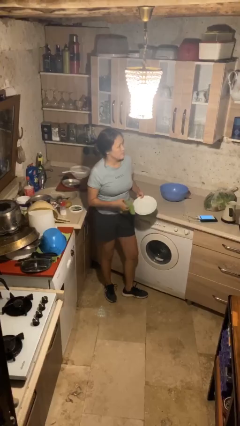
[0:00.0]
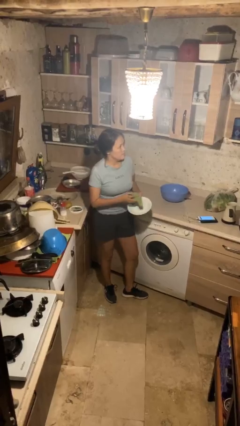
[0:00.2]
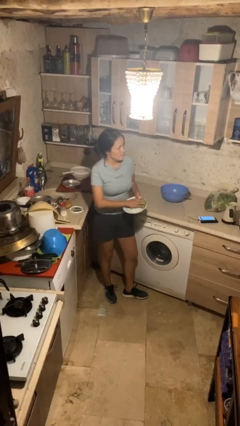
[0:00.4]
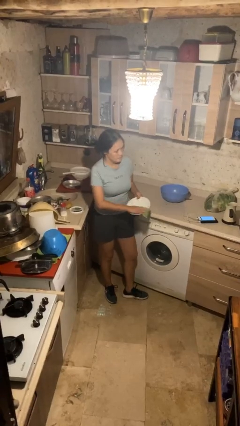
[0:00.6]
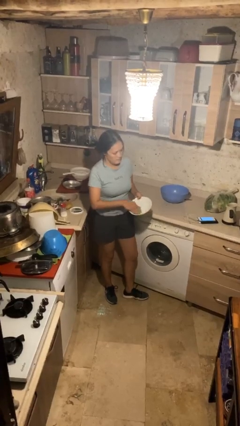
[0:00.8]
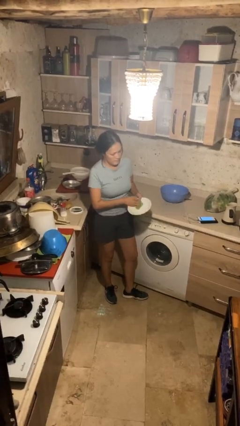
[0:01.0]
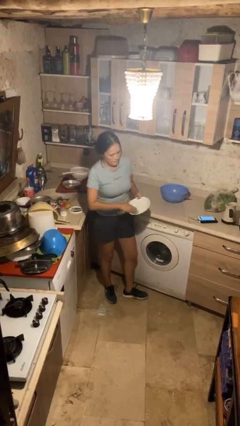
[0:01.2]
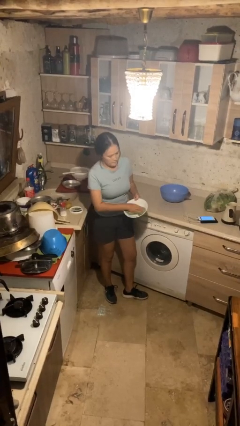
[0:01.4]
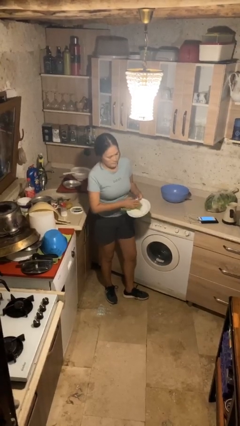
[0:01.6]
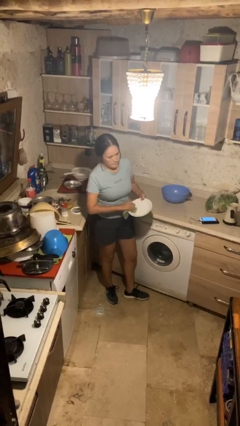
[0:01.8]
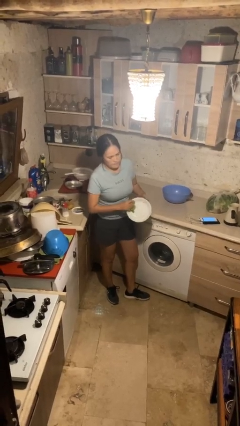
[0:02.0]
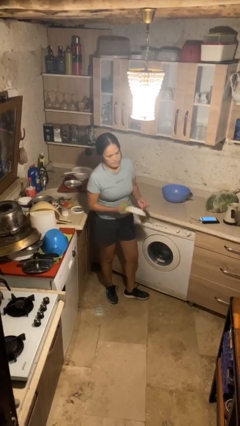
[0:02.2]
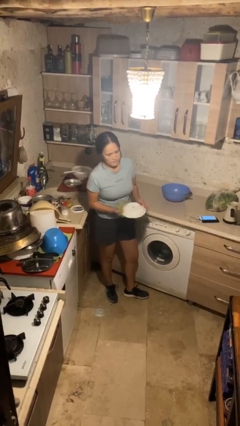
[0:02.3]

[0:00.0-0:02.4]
person dries dish

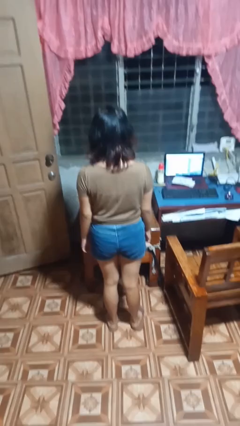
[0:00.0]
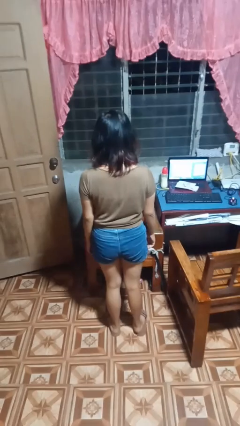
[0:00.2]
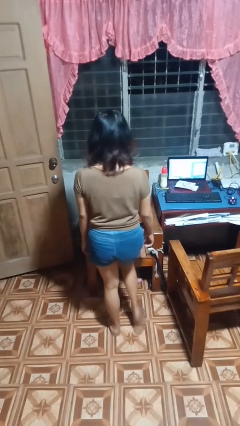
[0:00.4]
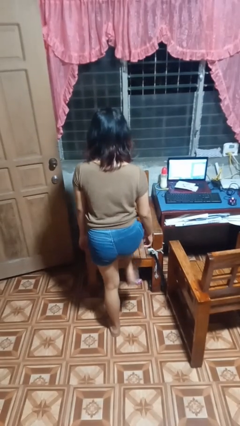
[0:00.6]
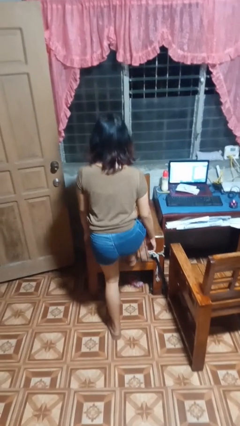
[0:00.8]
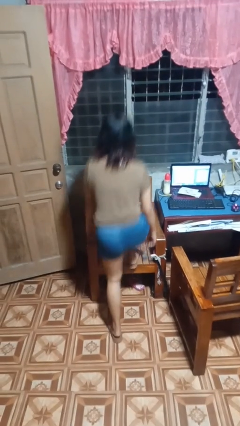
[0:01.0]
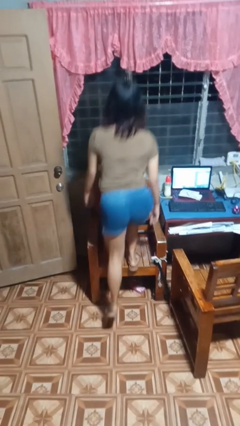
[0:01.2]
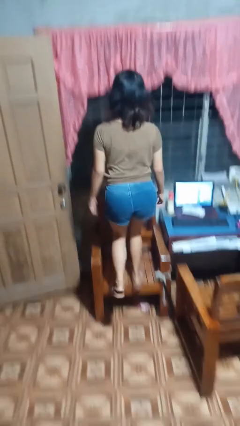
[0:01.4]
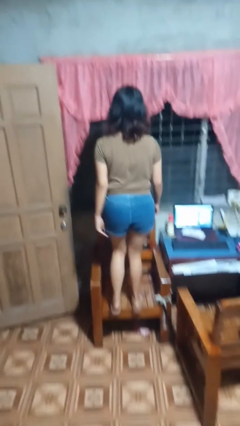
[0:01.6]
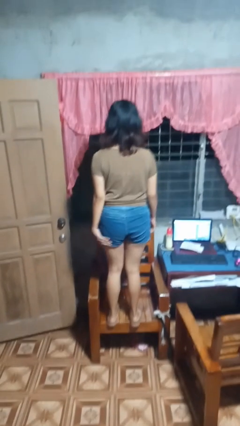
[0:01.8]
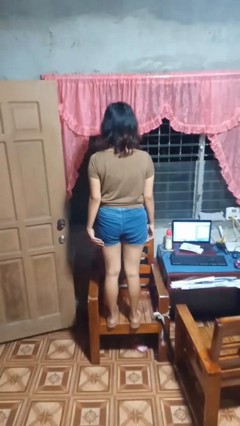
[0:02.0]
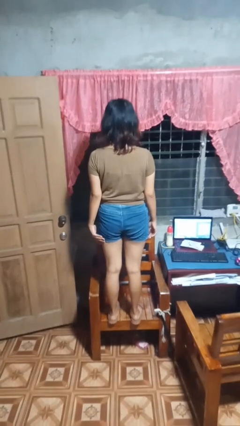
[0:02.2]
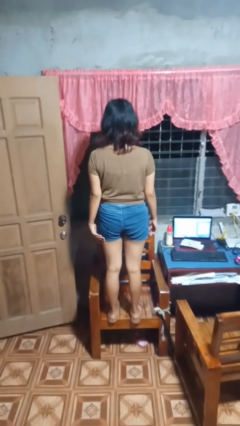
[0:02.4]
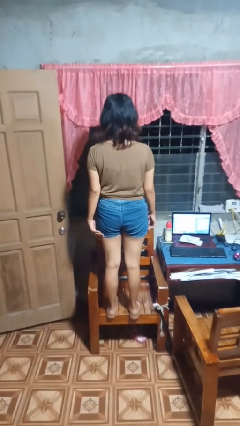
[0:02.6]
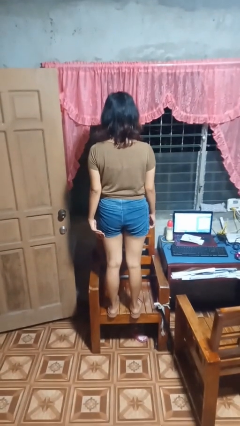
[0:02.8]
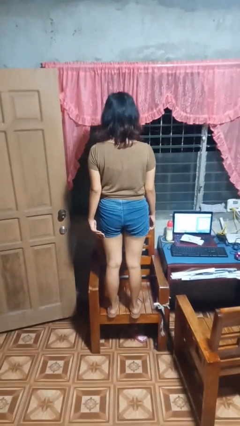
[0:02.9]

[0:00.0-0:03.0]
person climbs on chair

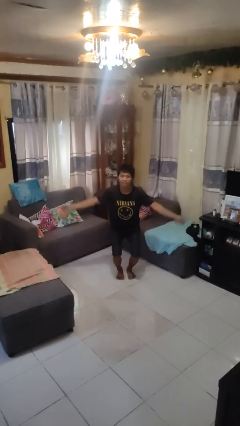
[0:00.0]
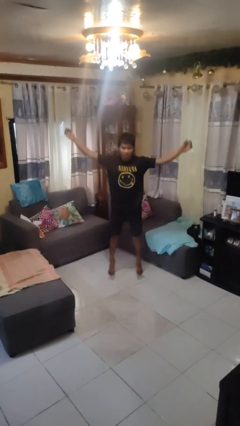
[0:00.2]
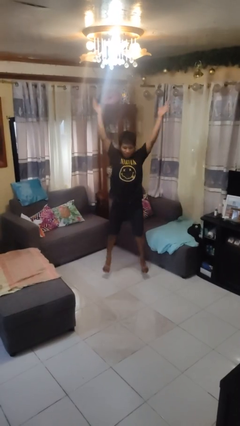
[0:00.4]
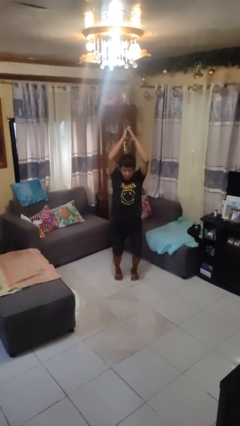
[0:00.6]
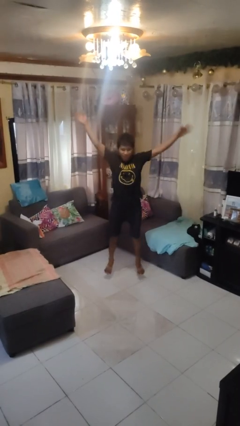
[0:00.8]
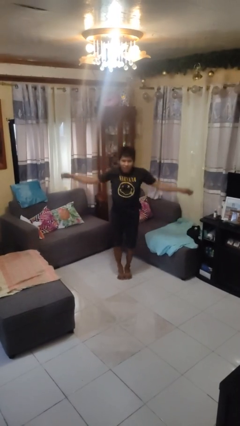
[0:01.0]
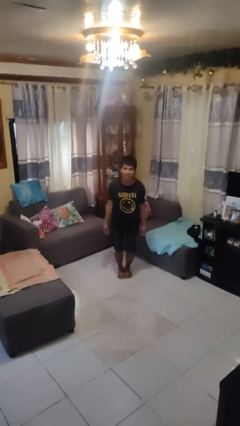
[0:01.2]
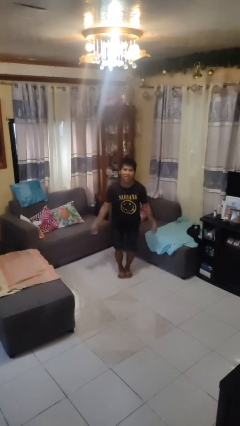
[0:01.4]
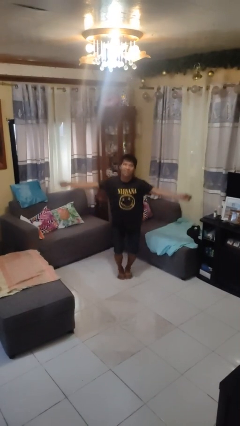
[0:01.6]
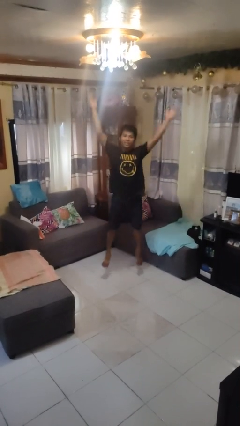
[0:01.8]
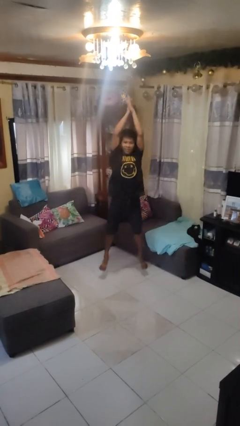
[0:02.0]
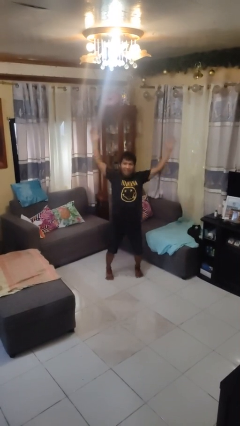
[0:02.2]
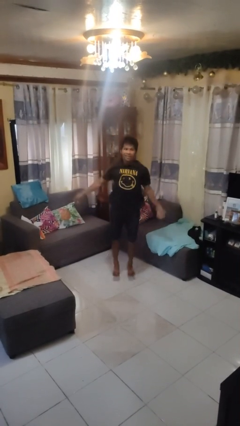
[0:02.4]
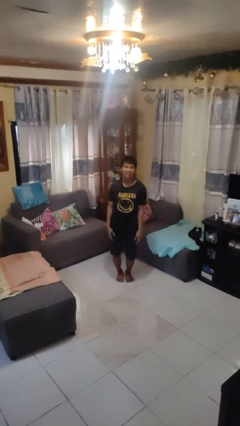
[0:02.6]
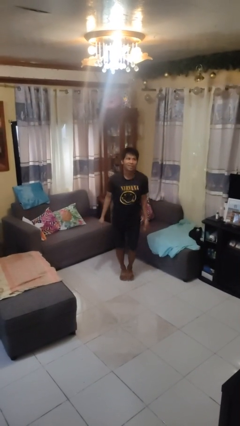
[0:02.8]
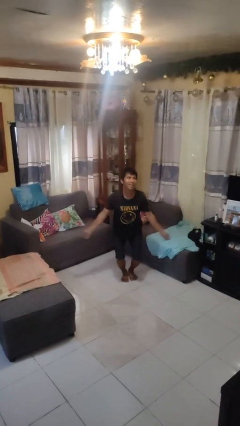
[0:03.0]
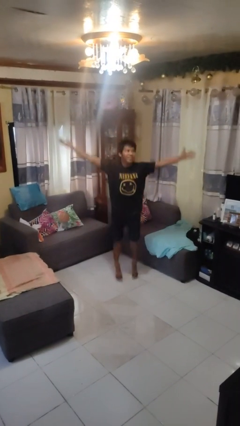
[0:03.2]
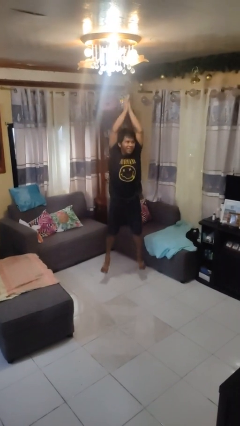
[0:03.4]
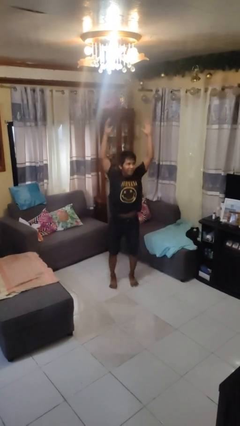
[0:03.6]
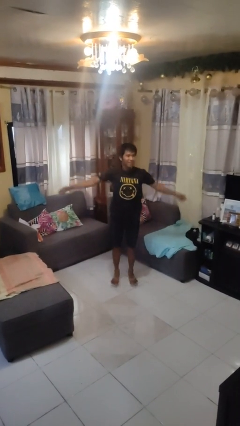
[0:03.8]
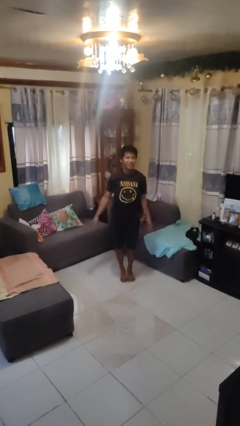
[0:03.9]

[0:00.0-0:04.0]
person exercises with jumping jacks

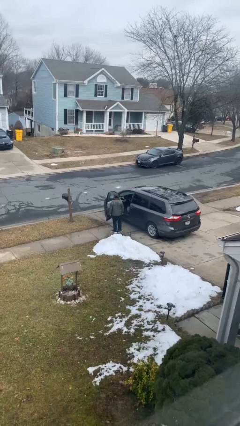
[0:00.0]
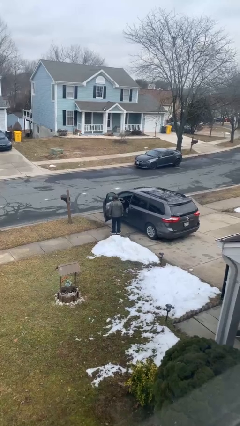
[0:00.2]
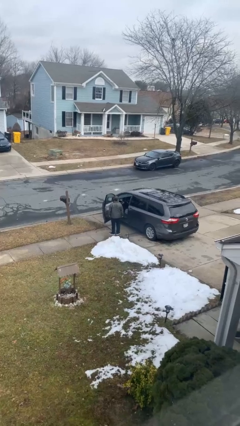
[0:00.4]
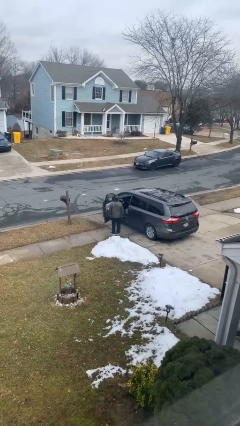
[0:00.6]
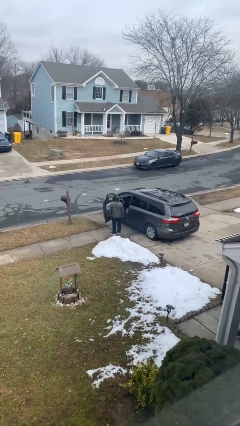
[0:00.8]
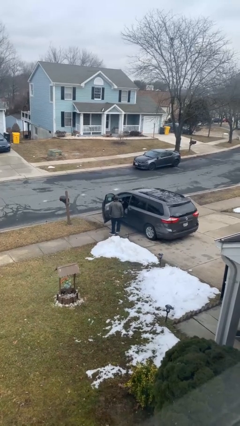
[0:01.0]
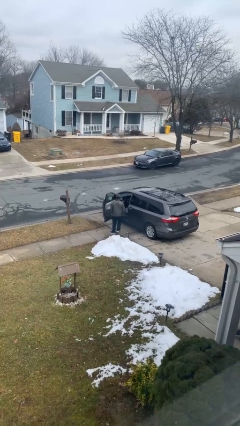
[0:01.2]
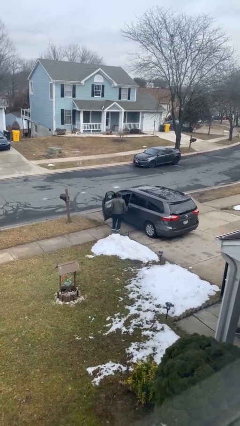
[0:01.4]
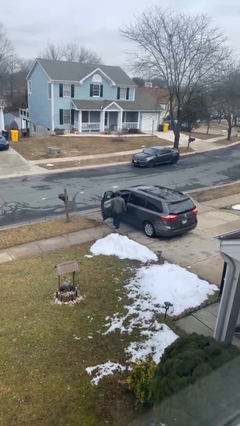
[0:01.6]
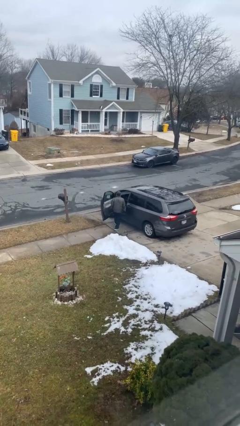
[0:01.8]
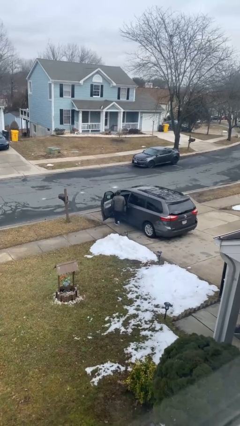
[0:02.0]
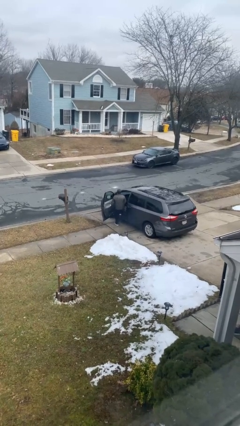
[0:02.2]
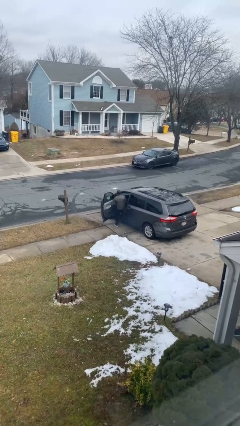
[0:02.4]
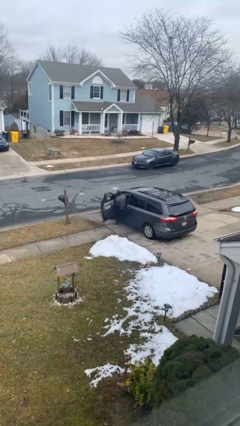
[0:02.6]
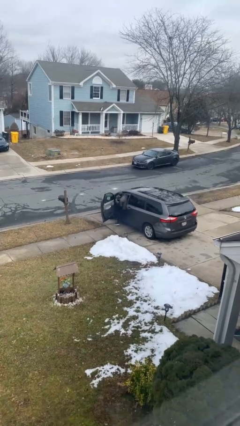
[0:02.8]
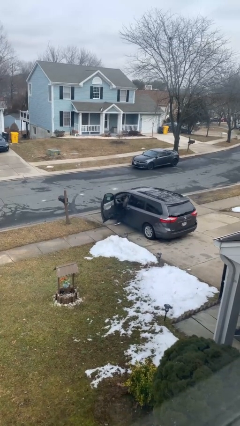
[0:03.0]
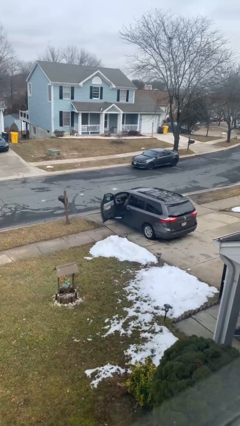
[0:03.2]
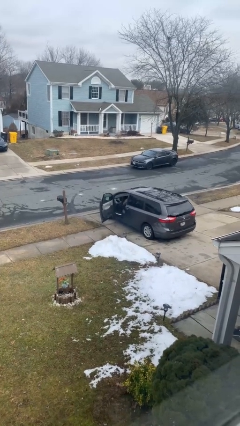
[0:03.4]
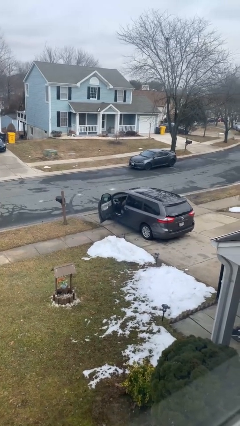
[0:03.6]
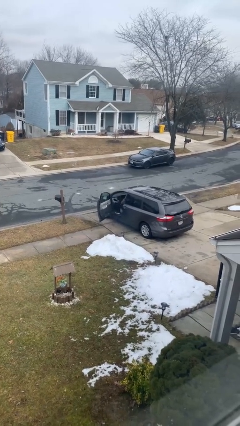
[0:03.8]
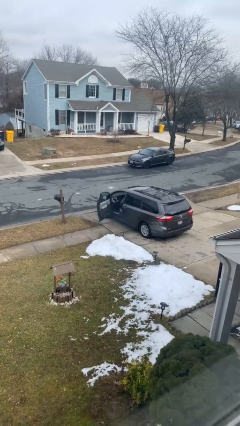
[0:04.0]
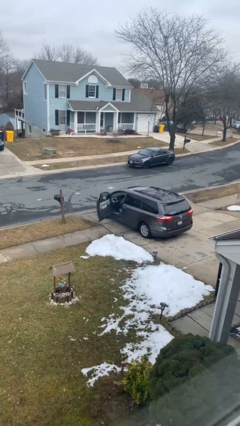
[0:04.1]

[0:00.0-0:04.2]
person enters car

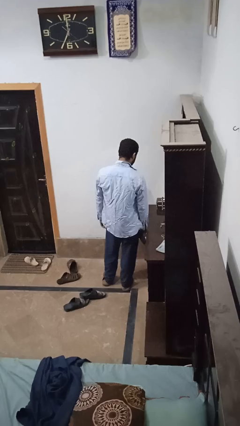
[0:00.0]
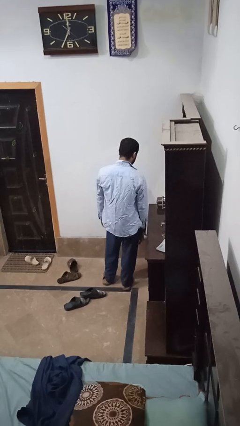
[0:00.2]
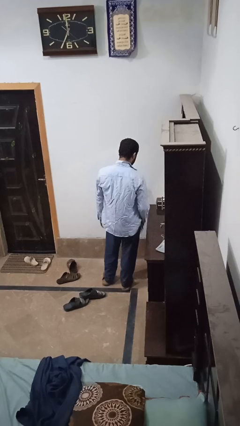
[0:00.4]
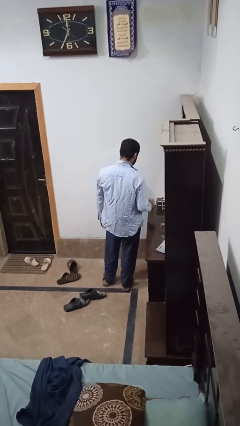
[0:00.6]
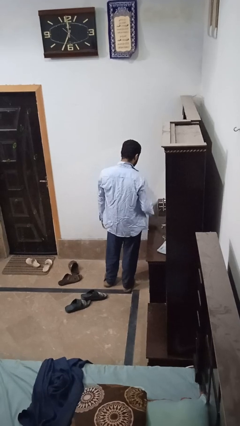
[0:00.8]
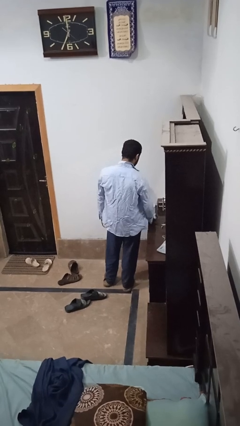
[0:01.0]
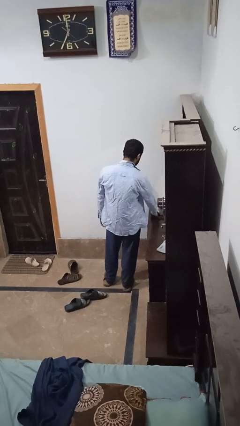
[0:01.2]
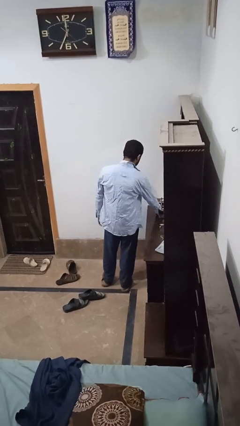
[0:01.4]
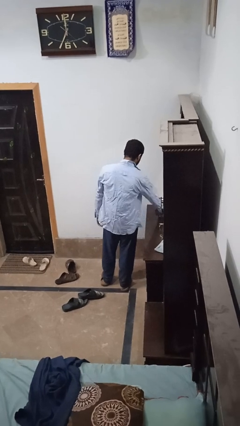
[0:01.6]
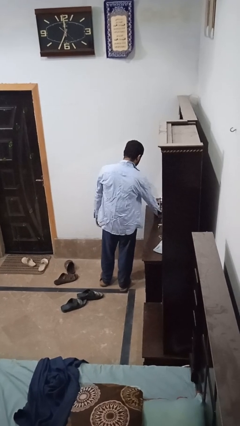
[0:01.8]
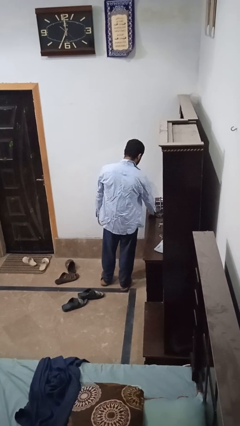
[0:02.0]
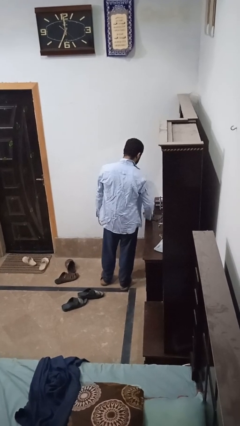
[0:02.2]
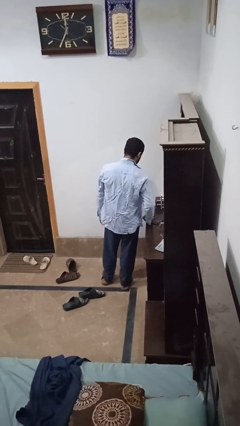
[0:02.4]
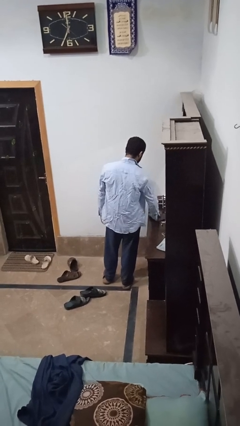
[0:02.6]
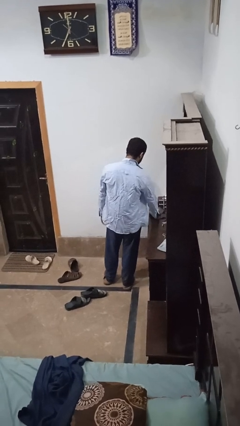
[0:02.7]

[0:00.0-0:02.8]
person cleans table with rag

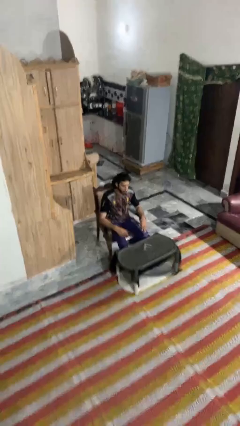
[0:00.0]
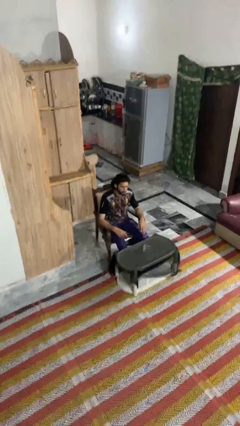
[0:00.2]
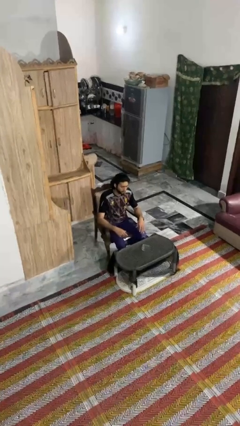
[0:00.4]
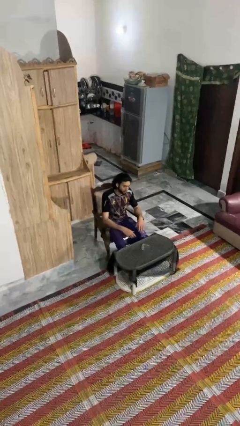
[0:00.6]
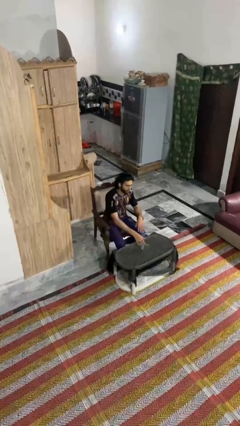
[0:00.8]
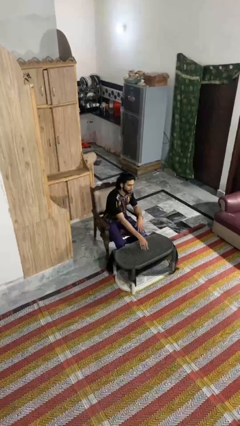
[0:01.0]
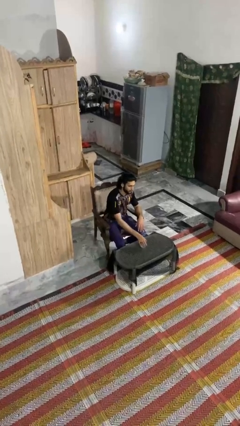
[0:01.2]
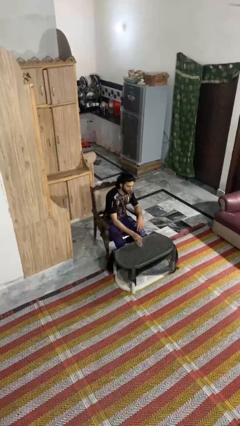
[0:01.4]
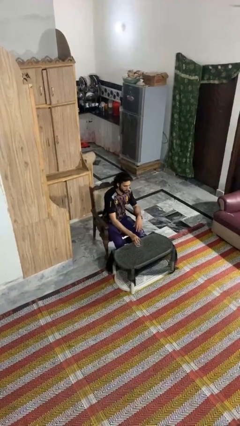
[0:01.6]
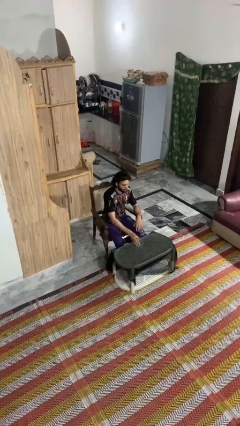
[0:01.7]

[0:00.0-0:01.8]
person sets upright glass
